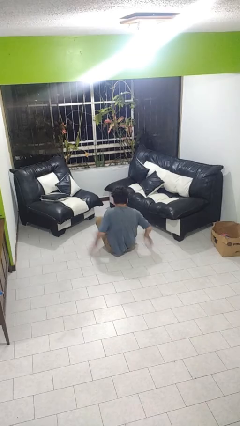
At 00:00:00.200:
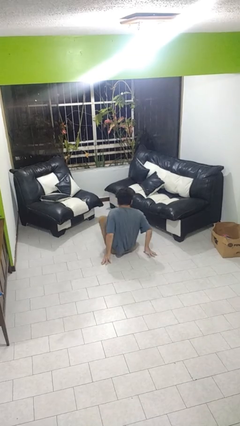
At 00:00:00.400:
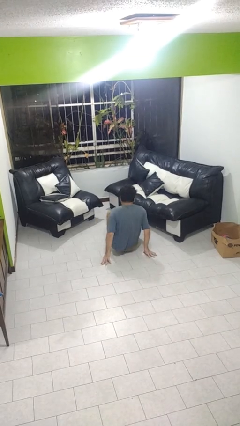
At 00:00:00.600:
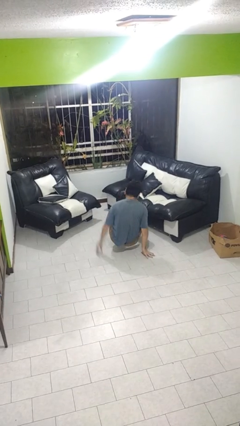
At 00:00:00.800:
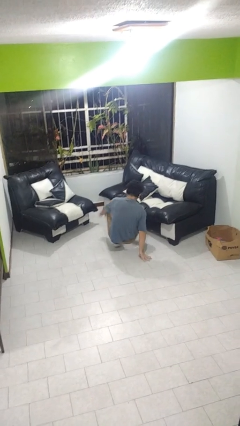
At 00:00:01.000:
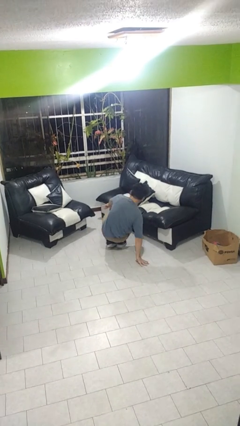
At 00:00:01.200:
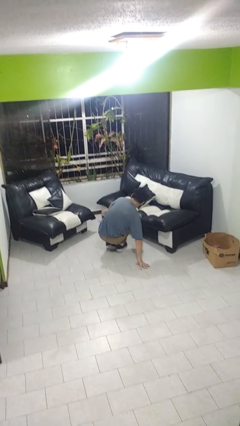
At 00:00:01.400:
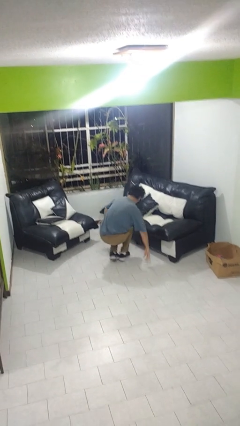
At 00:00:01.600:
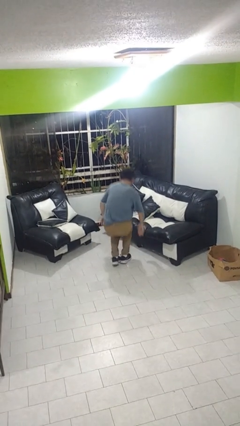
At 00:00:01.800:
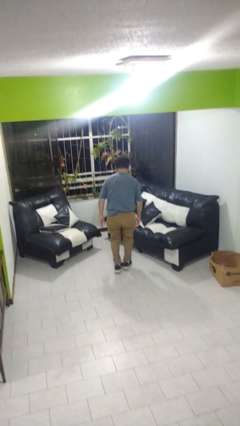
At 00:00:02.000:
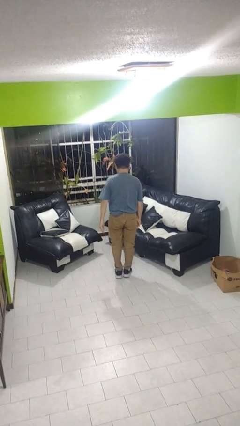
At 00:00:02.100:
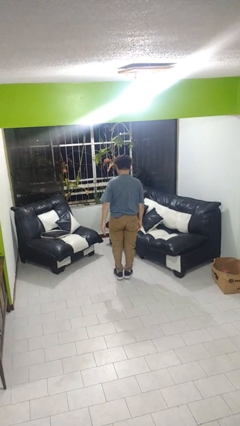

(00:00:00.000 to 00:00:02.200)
person stands up from floor

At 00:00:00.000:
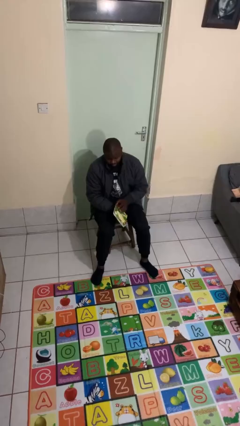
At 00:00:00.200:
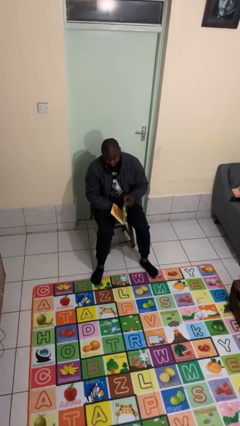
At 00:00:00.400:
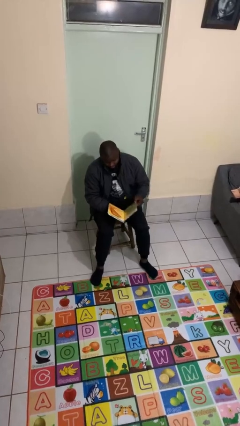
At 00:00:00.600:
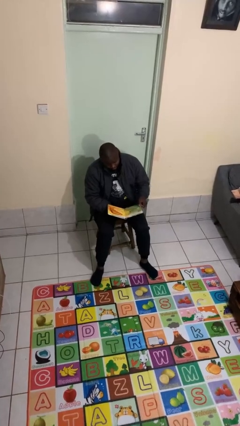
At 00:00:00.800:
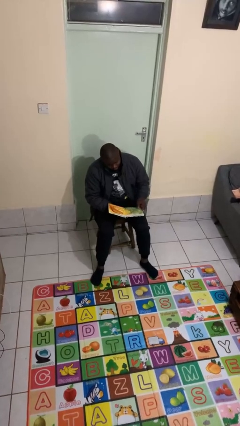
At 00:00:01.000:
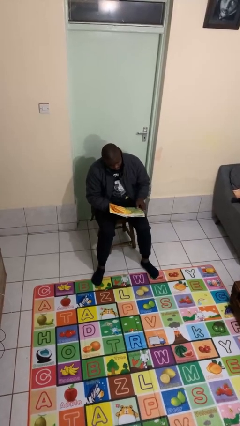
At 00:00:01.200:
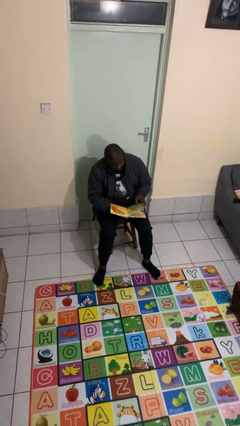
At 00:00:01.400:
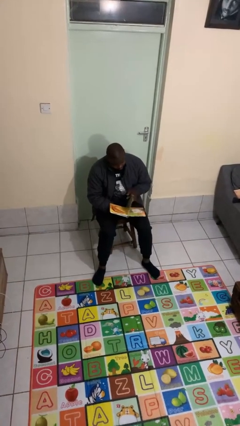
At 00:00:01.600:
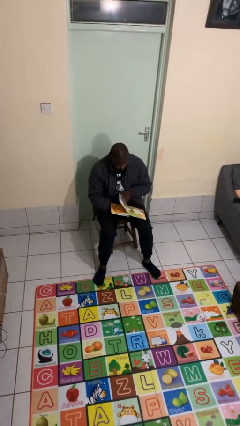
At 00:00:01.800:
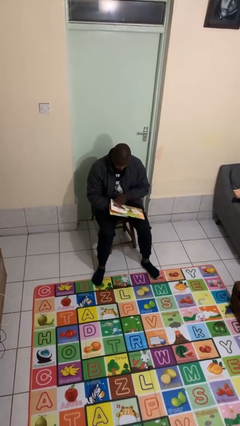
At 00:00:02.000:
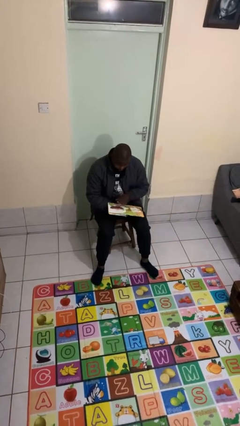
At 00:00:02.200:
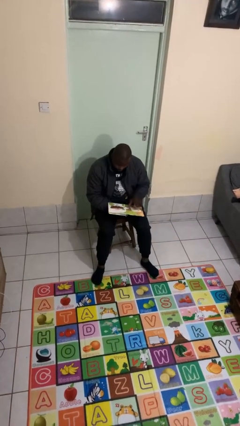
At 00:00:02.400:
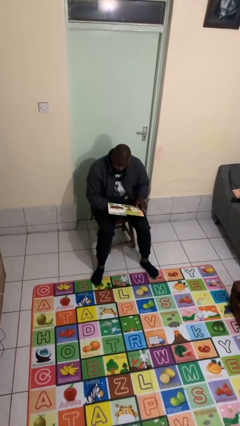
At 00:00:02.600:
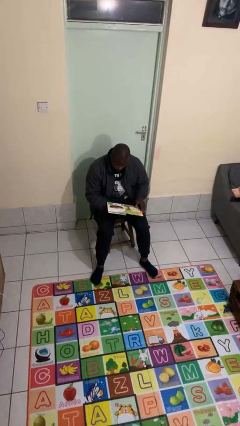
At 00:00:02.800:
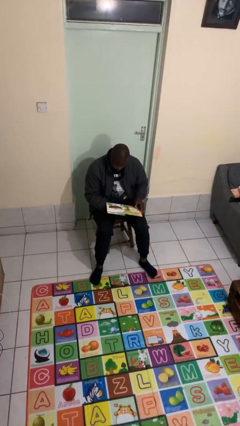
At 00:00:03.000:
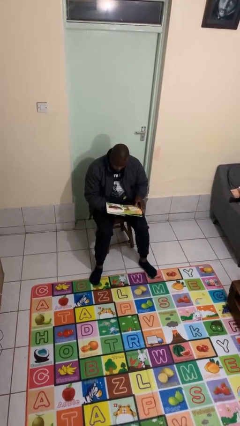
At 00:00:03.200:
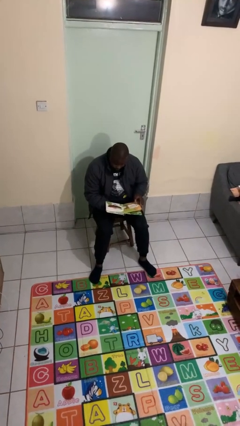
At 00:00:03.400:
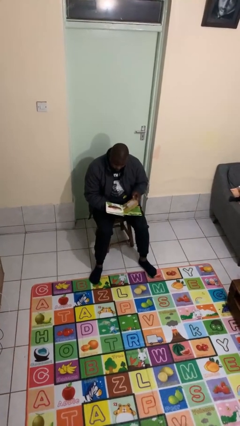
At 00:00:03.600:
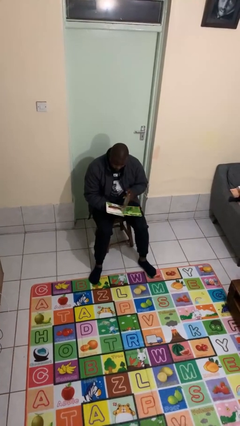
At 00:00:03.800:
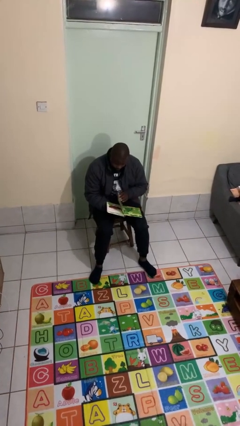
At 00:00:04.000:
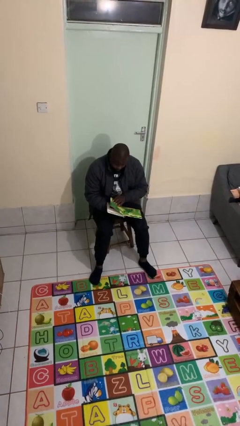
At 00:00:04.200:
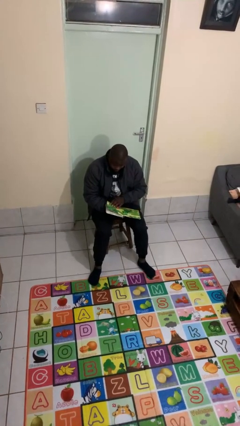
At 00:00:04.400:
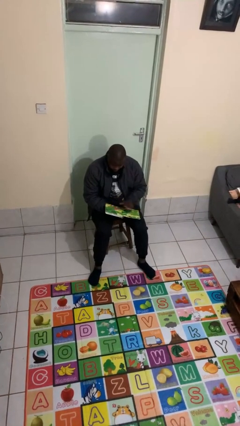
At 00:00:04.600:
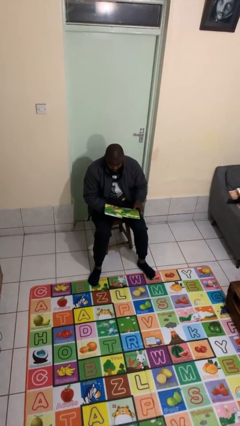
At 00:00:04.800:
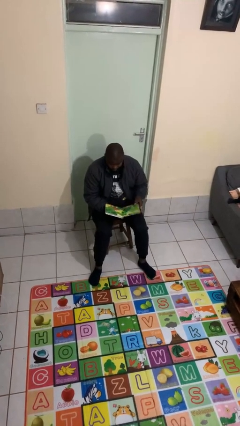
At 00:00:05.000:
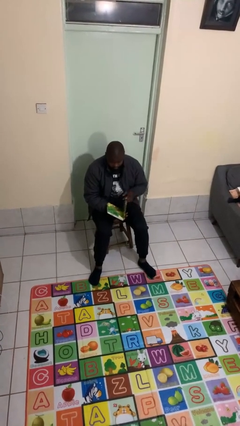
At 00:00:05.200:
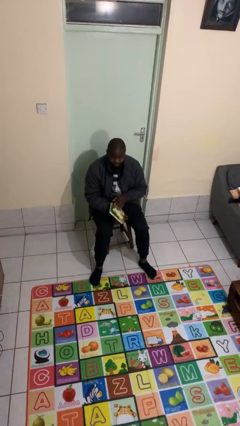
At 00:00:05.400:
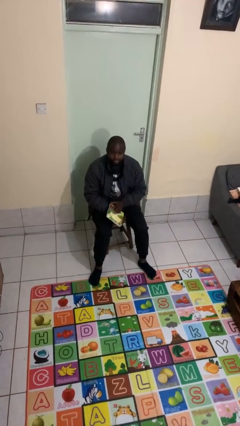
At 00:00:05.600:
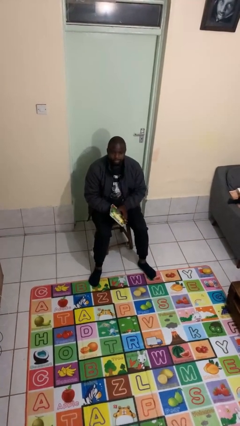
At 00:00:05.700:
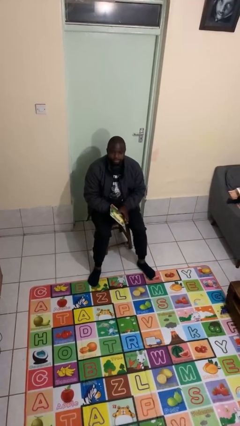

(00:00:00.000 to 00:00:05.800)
person reads book

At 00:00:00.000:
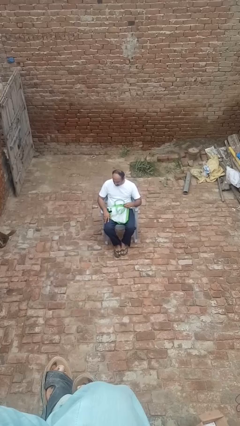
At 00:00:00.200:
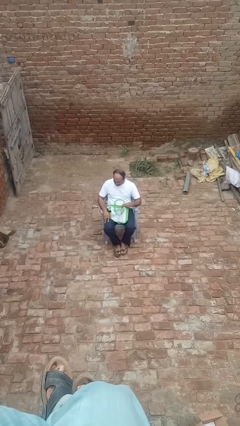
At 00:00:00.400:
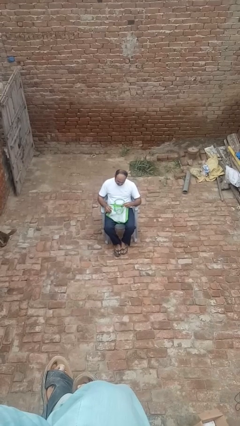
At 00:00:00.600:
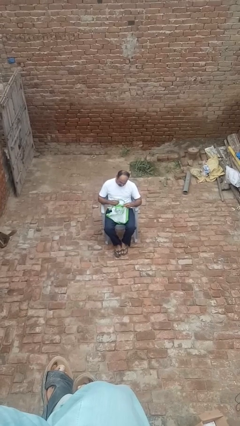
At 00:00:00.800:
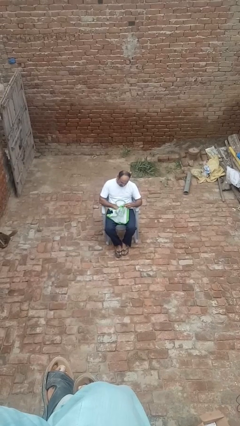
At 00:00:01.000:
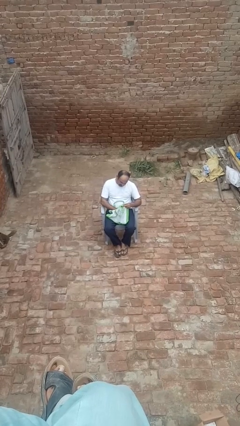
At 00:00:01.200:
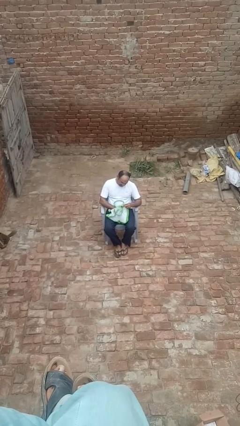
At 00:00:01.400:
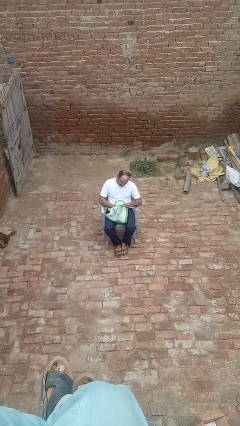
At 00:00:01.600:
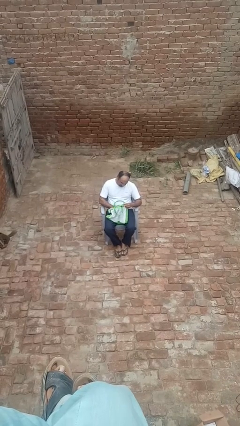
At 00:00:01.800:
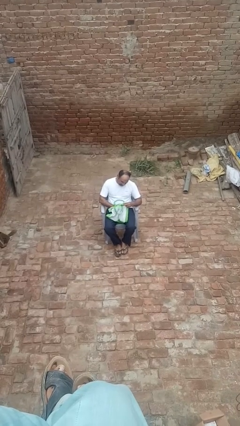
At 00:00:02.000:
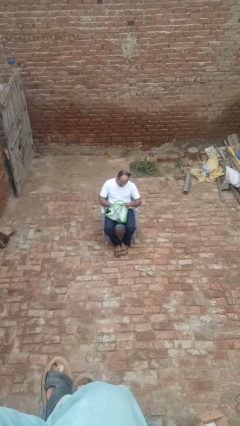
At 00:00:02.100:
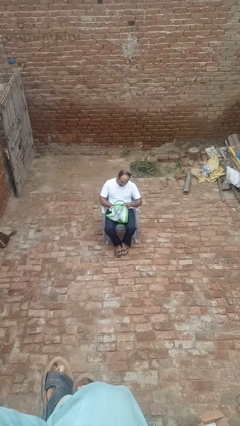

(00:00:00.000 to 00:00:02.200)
person searches in bag

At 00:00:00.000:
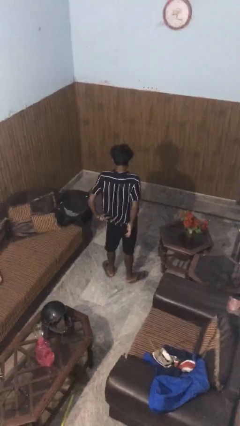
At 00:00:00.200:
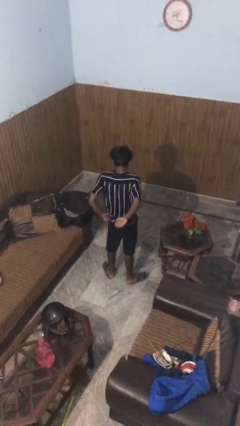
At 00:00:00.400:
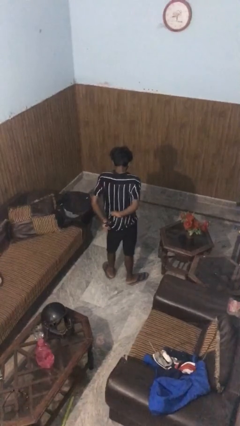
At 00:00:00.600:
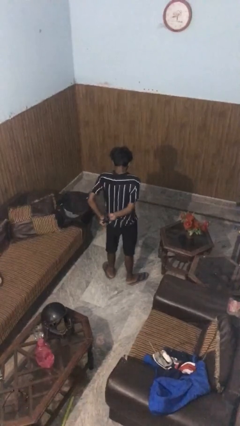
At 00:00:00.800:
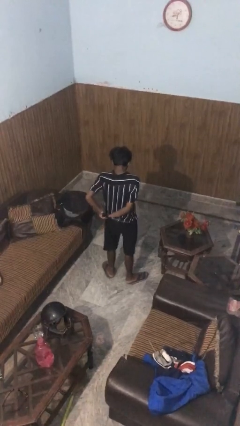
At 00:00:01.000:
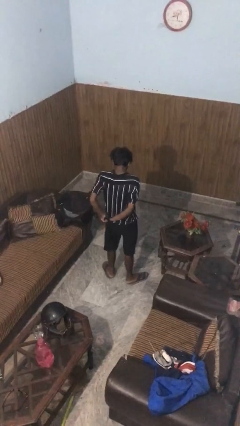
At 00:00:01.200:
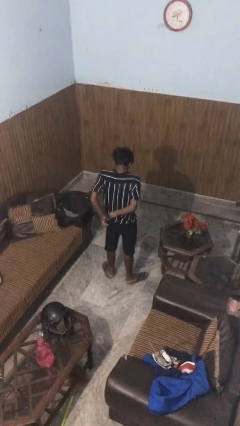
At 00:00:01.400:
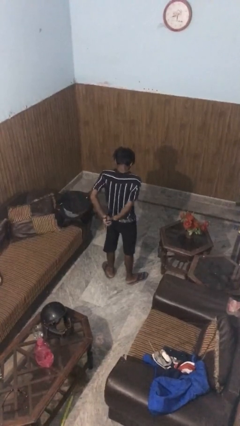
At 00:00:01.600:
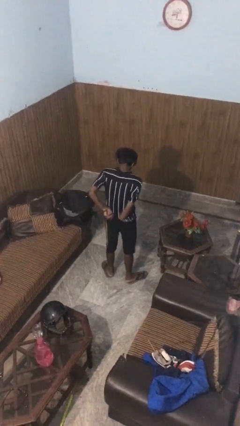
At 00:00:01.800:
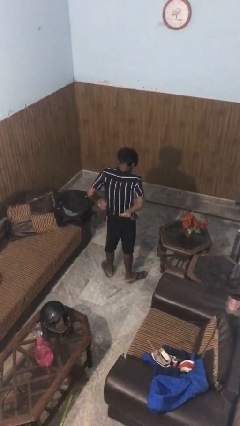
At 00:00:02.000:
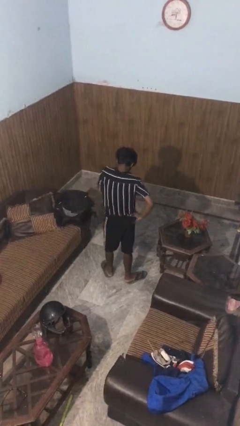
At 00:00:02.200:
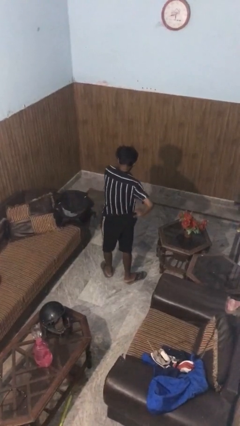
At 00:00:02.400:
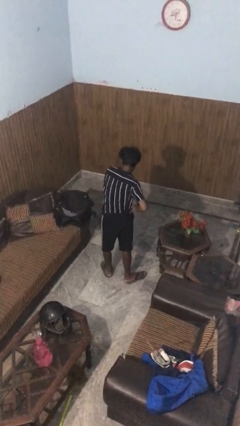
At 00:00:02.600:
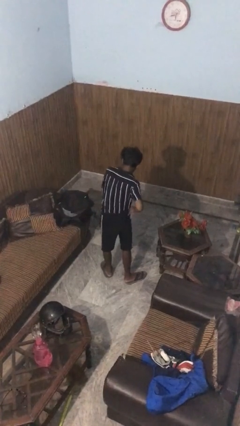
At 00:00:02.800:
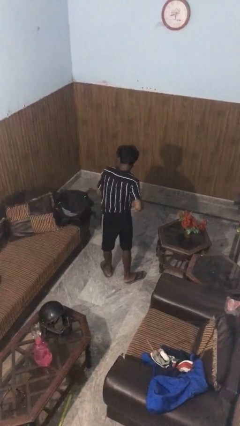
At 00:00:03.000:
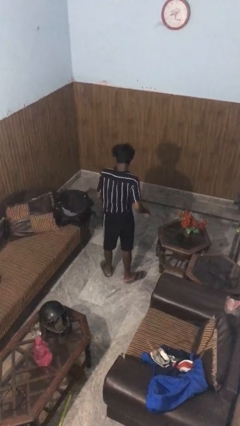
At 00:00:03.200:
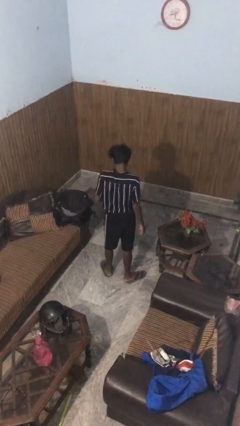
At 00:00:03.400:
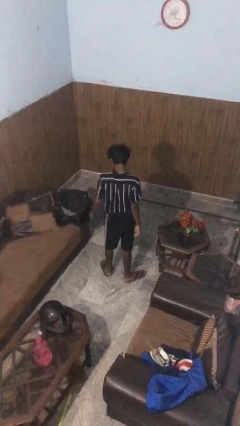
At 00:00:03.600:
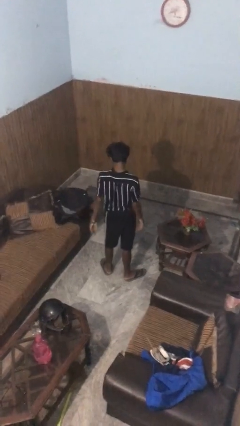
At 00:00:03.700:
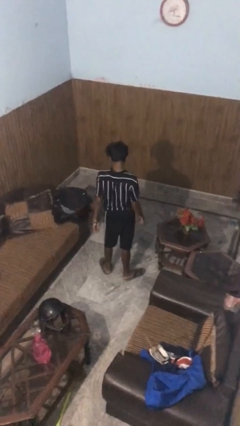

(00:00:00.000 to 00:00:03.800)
person tucks in shirt

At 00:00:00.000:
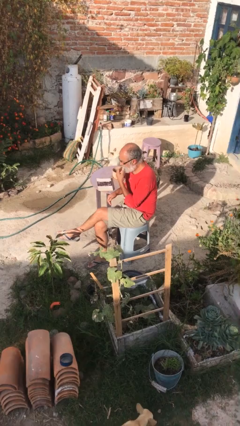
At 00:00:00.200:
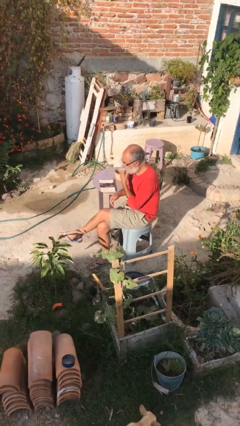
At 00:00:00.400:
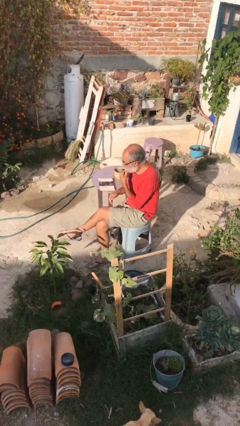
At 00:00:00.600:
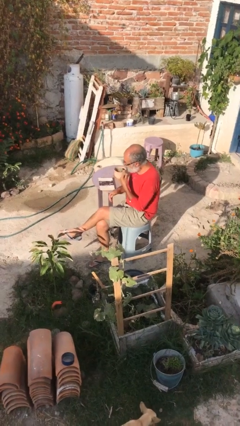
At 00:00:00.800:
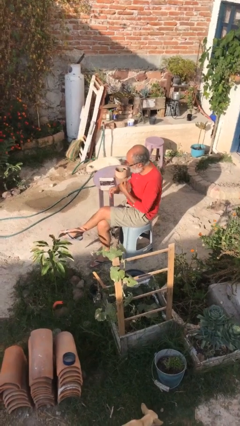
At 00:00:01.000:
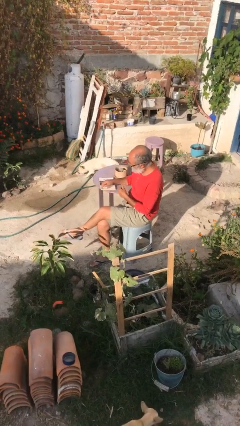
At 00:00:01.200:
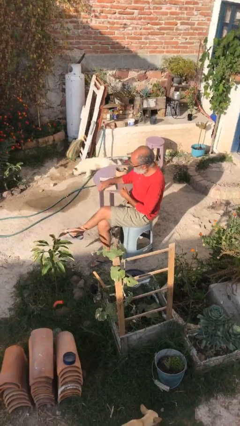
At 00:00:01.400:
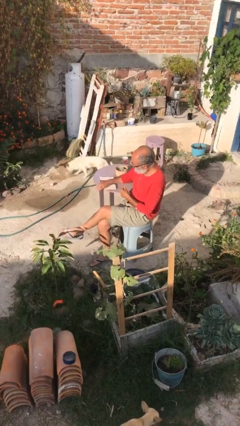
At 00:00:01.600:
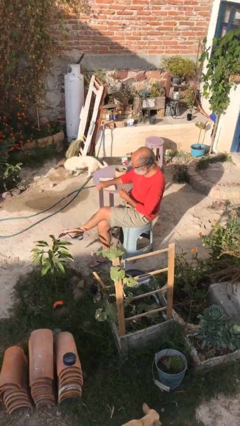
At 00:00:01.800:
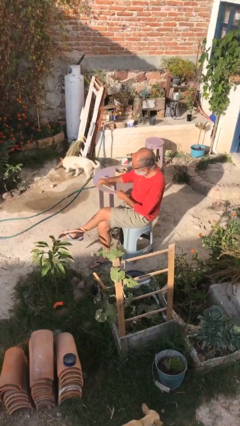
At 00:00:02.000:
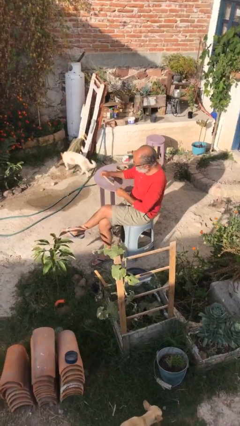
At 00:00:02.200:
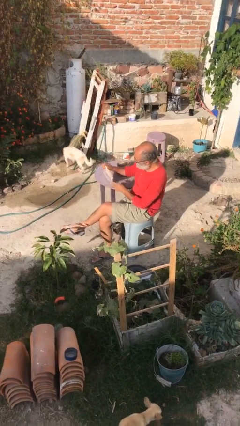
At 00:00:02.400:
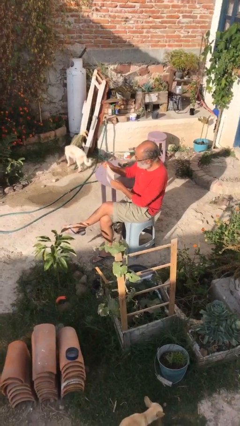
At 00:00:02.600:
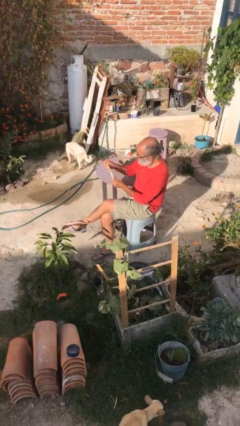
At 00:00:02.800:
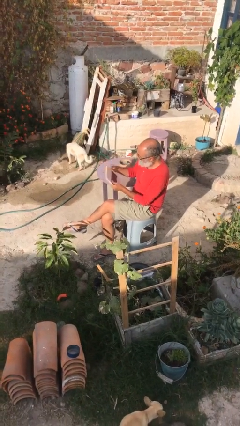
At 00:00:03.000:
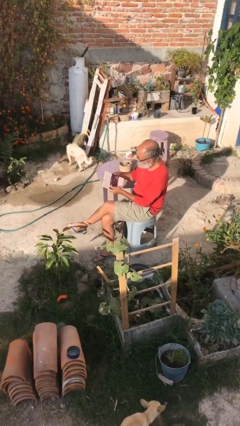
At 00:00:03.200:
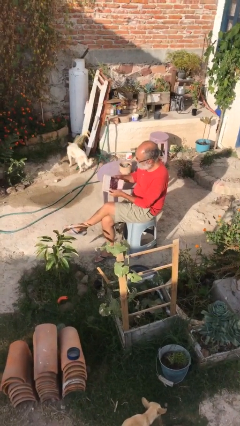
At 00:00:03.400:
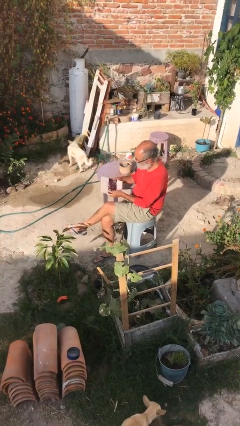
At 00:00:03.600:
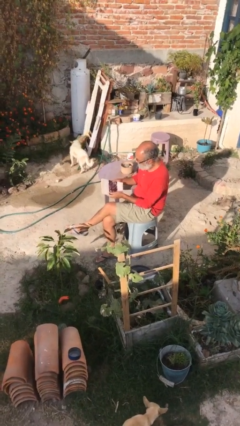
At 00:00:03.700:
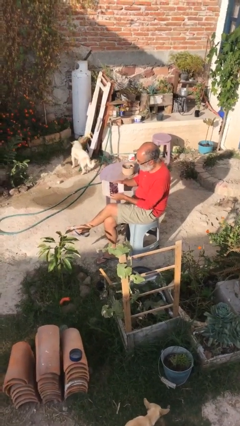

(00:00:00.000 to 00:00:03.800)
person picks up object from table
